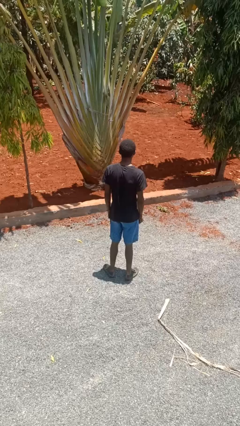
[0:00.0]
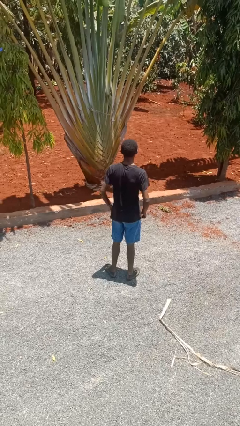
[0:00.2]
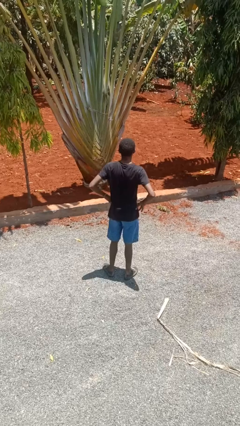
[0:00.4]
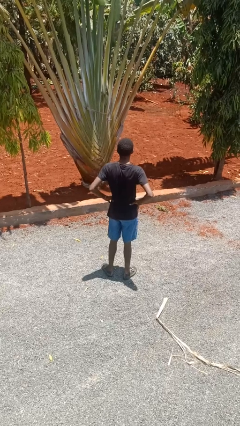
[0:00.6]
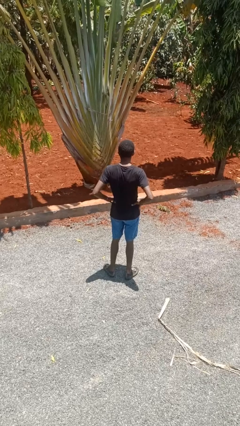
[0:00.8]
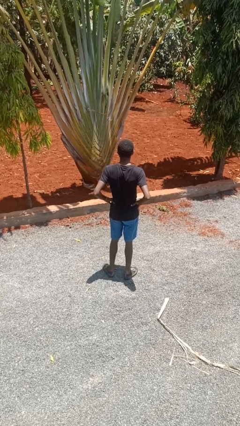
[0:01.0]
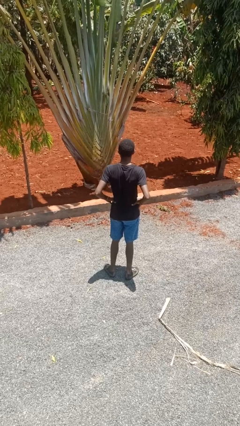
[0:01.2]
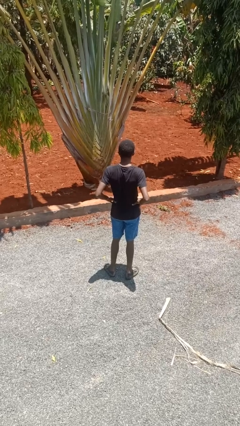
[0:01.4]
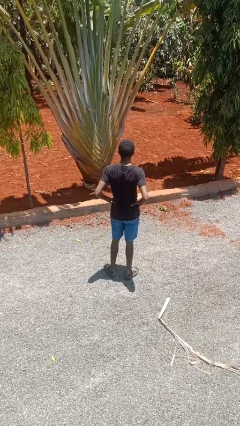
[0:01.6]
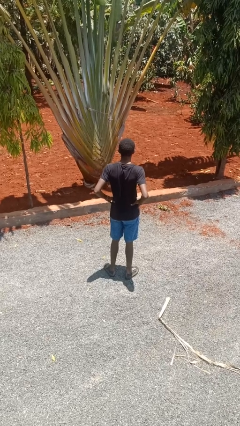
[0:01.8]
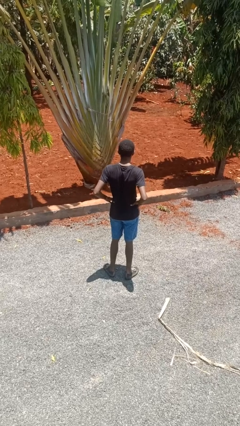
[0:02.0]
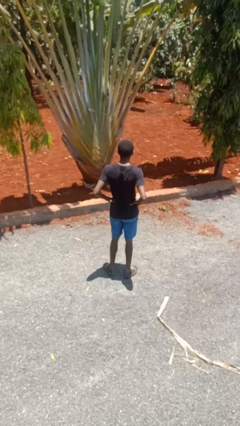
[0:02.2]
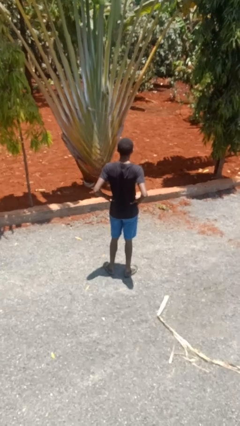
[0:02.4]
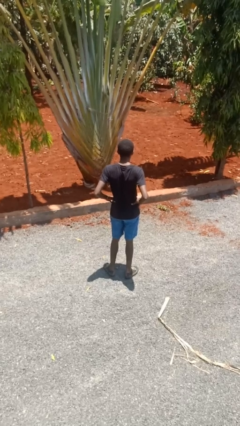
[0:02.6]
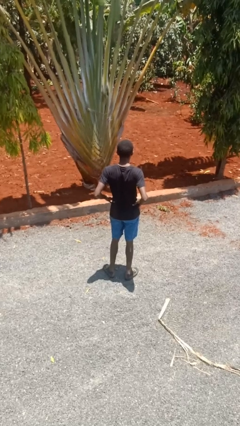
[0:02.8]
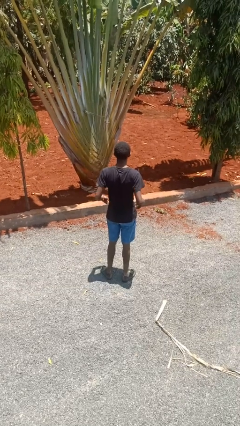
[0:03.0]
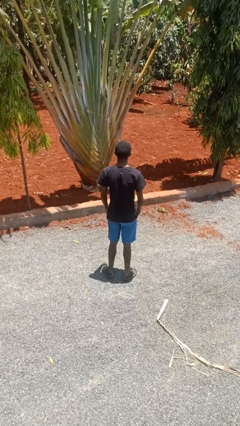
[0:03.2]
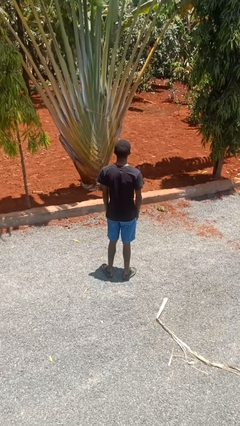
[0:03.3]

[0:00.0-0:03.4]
person wiggles hips

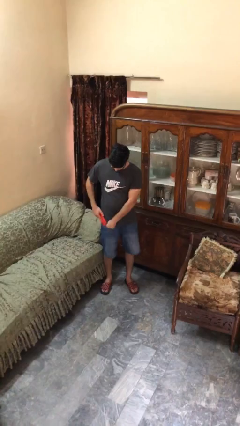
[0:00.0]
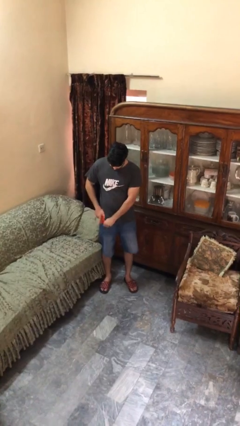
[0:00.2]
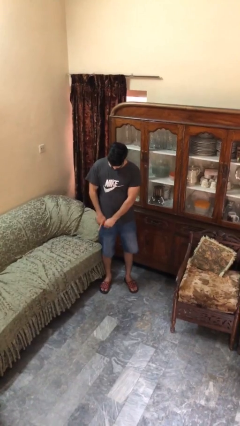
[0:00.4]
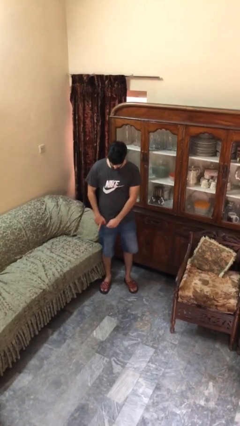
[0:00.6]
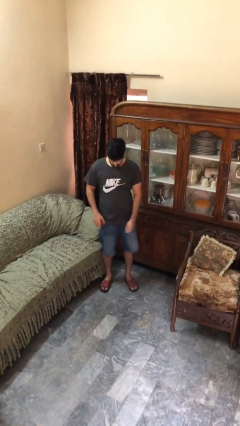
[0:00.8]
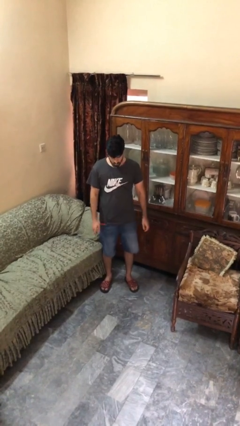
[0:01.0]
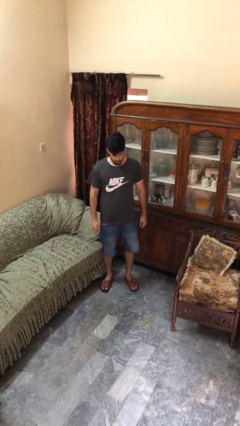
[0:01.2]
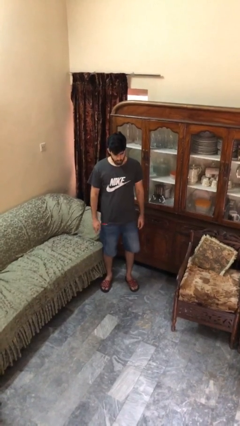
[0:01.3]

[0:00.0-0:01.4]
person puts phone into pocket

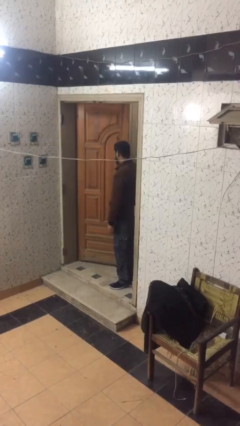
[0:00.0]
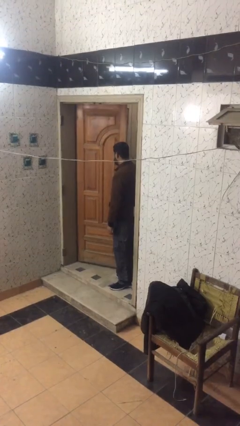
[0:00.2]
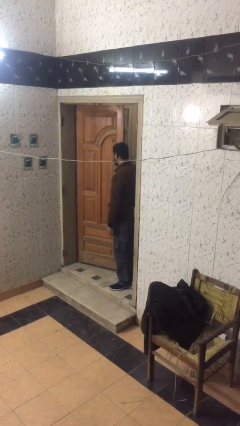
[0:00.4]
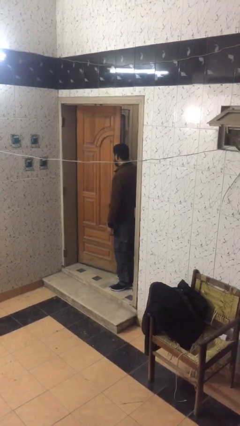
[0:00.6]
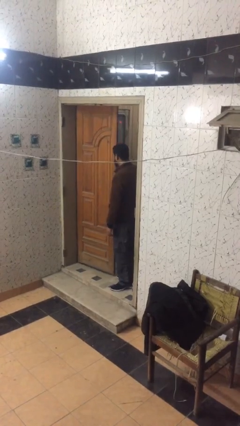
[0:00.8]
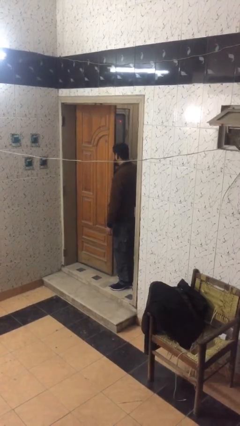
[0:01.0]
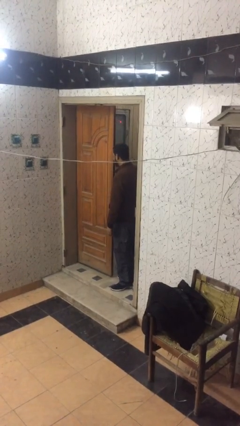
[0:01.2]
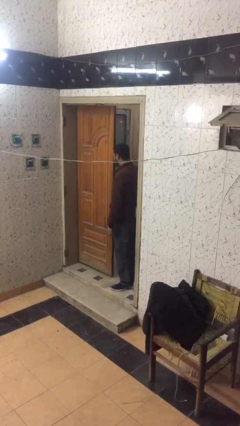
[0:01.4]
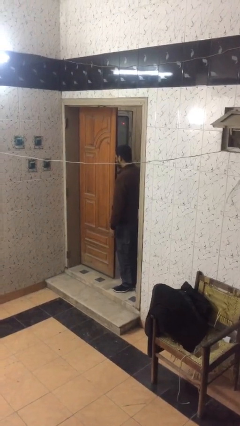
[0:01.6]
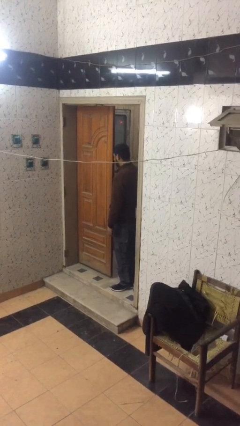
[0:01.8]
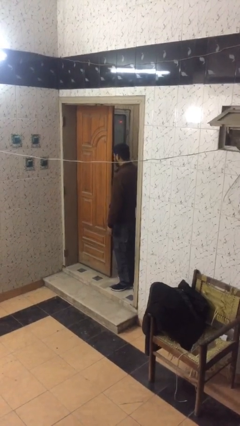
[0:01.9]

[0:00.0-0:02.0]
person closes facility door

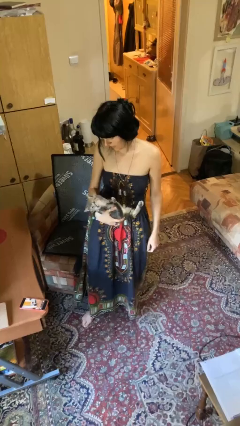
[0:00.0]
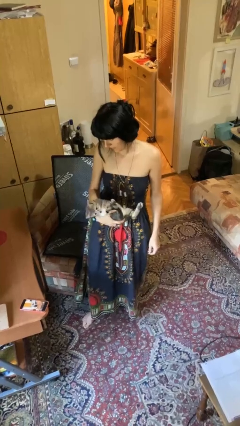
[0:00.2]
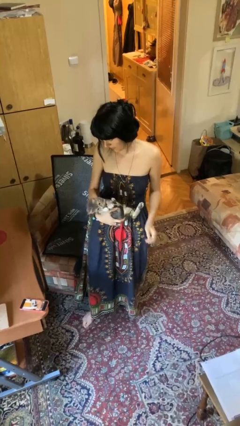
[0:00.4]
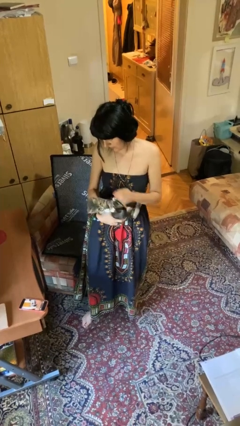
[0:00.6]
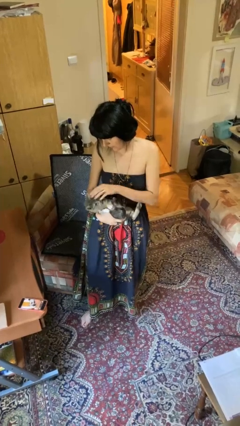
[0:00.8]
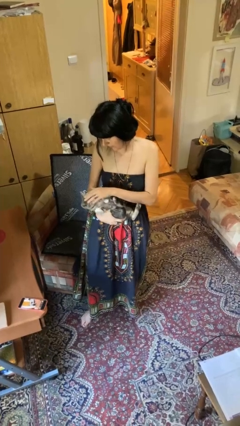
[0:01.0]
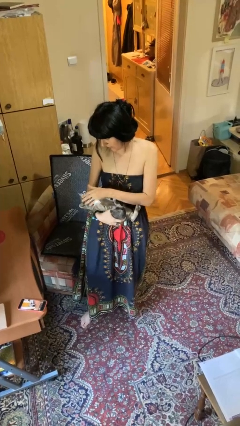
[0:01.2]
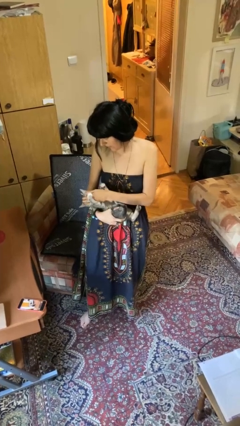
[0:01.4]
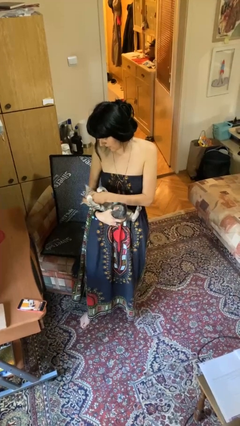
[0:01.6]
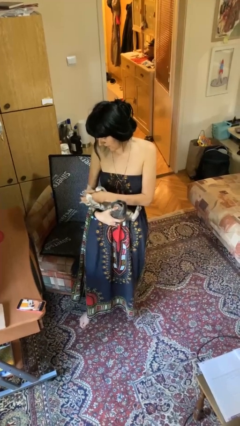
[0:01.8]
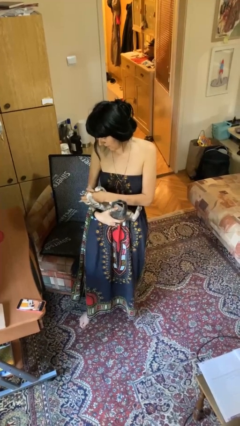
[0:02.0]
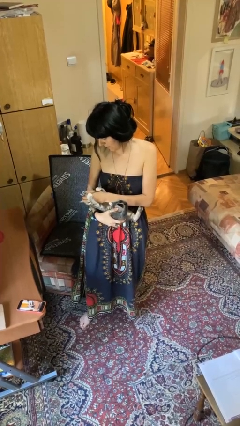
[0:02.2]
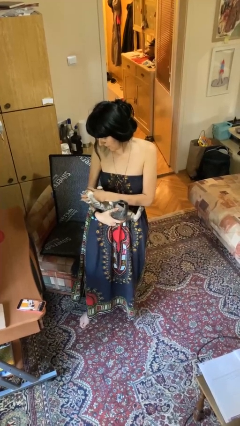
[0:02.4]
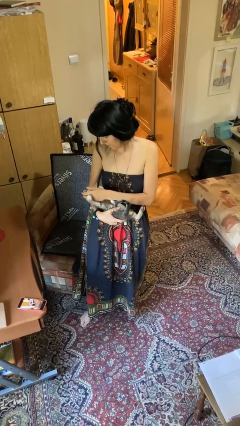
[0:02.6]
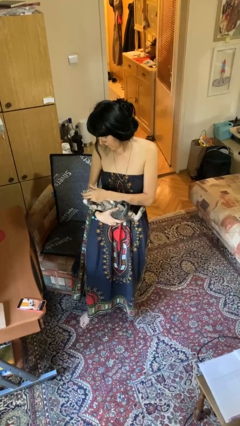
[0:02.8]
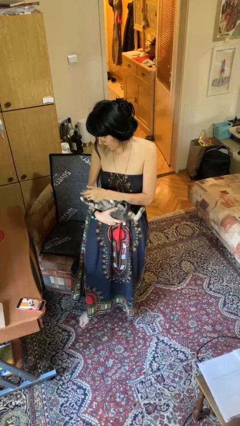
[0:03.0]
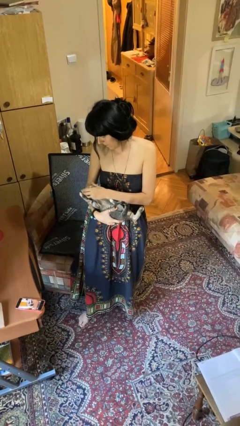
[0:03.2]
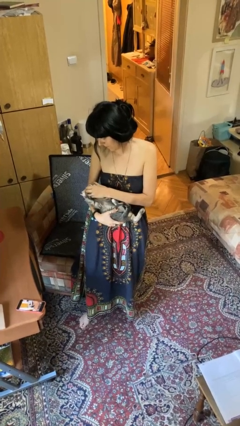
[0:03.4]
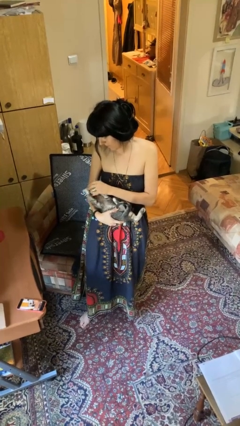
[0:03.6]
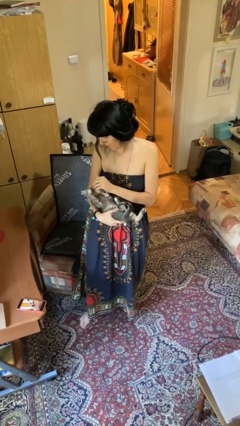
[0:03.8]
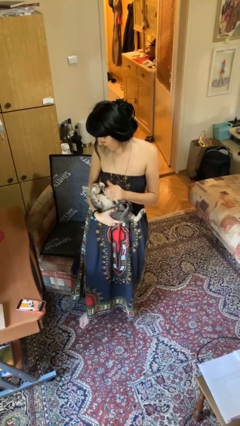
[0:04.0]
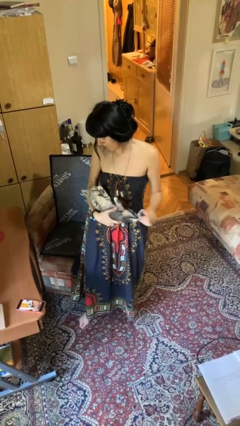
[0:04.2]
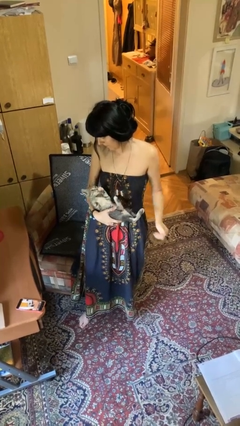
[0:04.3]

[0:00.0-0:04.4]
person pets cat

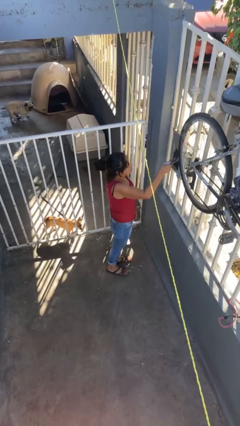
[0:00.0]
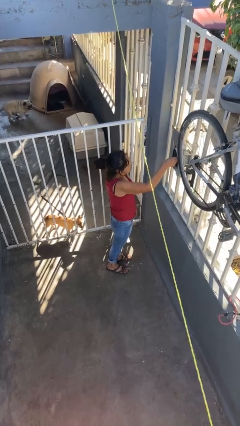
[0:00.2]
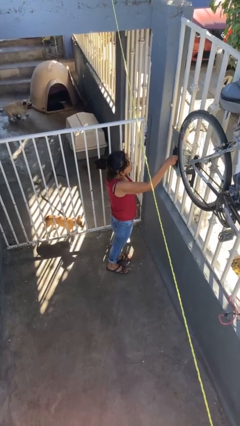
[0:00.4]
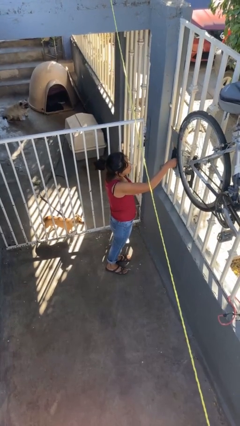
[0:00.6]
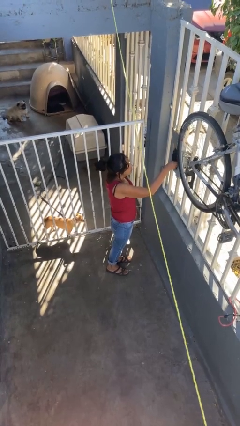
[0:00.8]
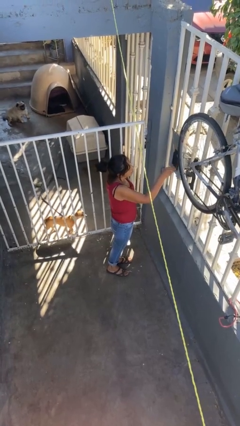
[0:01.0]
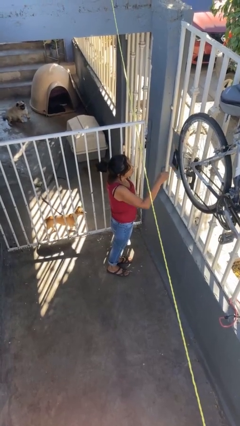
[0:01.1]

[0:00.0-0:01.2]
person puts letters in mailbox

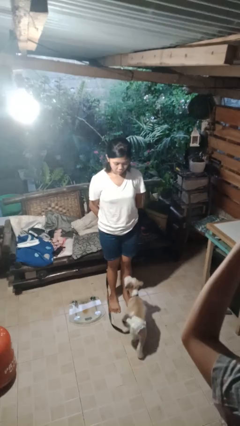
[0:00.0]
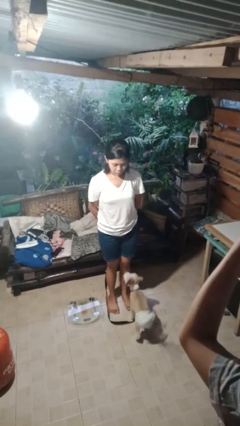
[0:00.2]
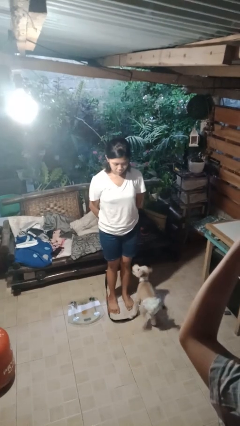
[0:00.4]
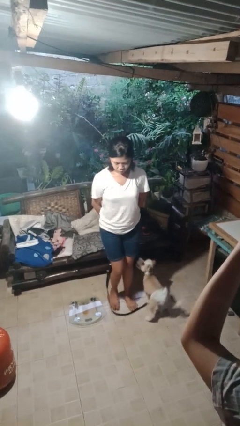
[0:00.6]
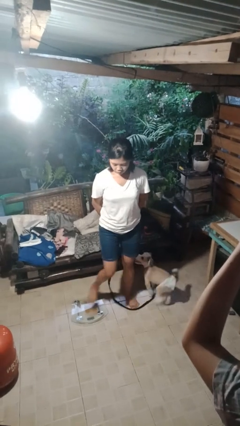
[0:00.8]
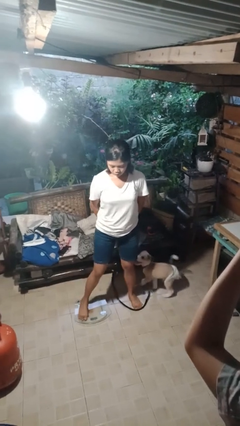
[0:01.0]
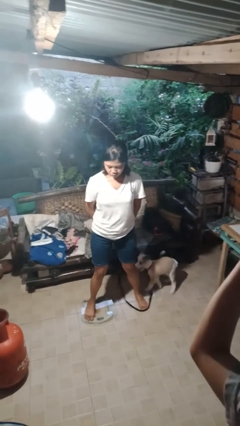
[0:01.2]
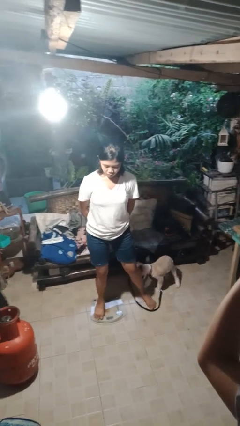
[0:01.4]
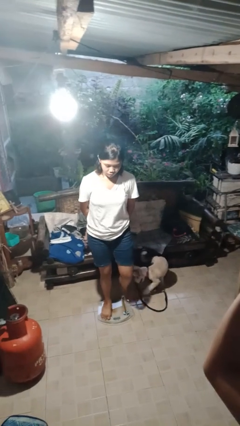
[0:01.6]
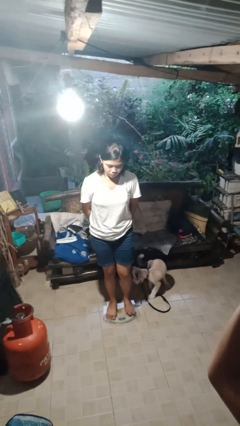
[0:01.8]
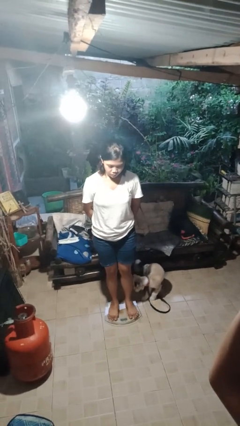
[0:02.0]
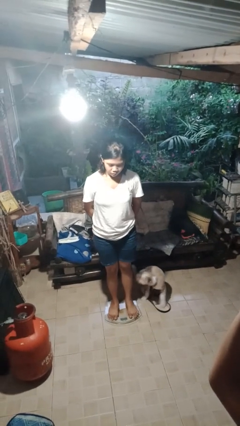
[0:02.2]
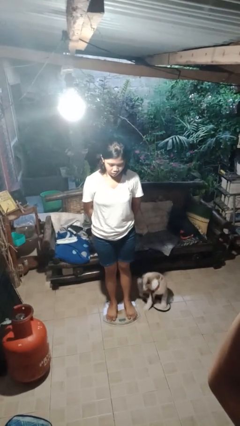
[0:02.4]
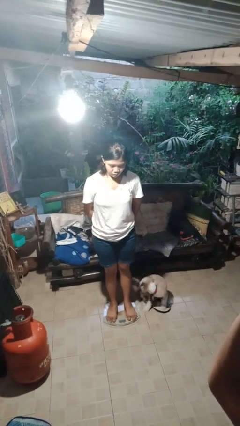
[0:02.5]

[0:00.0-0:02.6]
person uses bodyweight scale

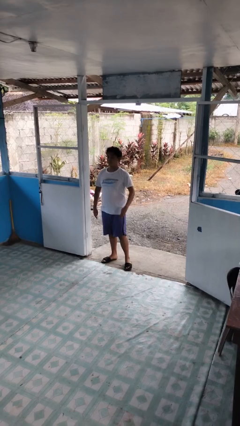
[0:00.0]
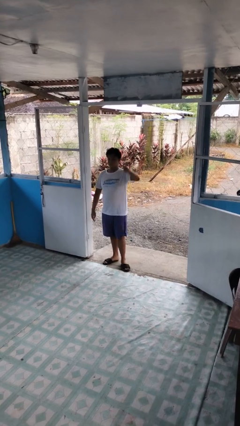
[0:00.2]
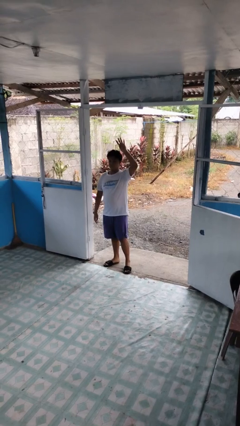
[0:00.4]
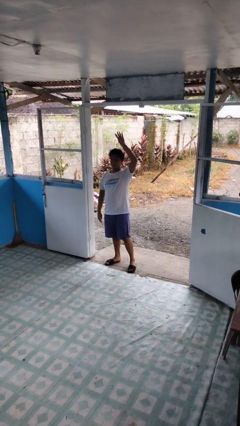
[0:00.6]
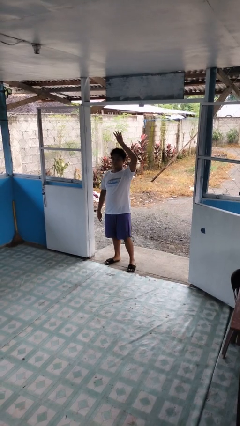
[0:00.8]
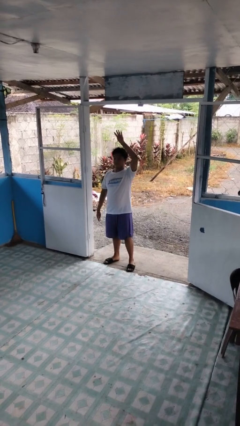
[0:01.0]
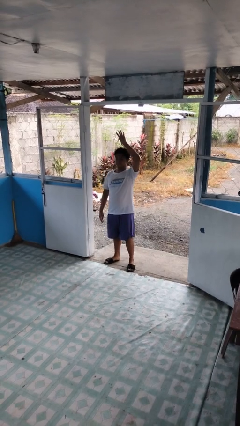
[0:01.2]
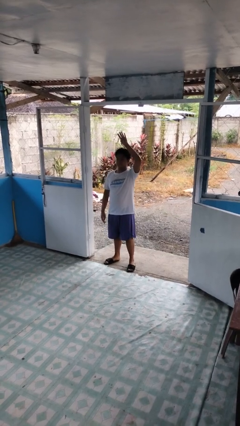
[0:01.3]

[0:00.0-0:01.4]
person gestures number four

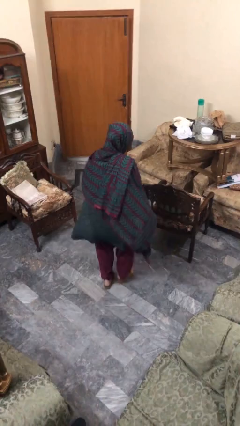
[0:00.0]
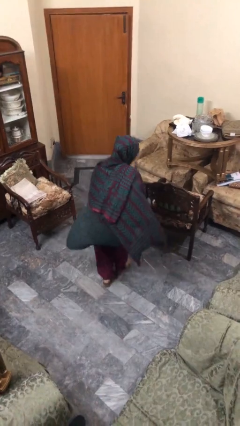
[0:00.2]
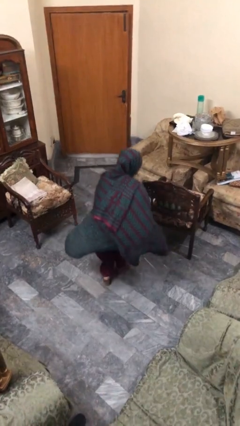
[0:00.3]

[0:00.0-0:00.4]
person sits crisscross
